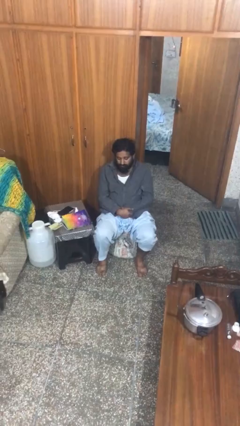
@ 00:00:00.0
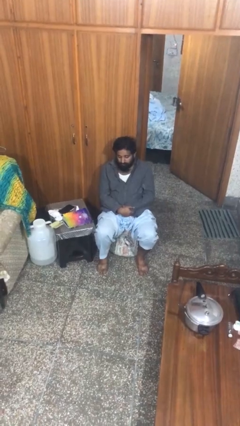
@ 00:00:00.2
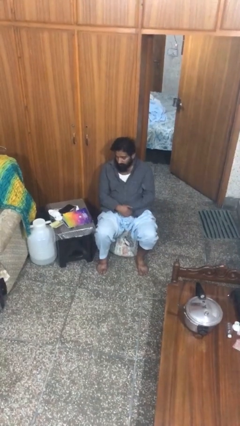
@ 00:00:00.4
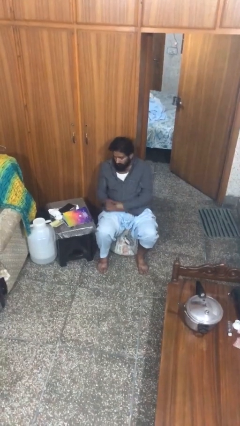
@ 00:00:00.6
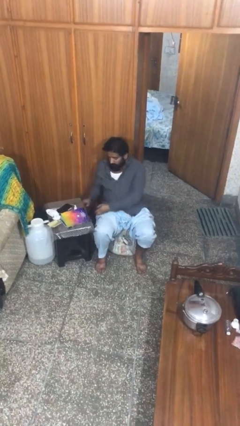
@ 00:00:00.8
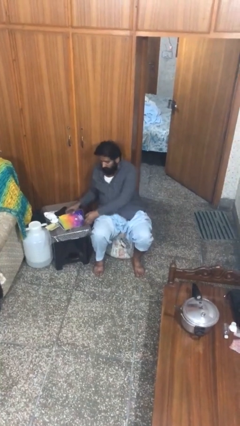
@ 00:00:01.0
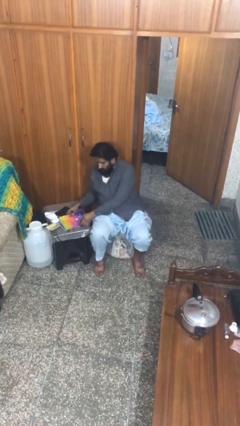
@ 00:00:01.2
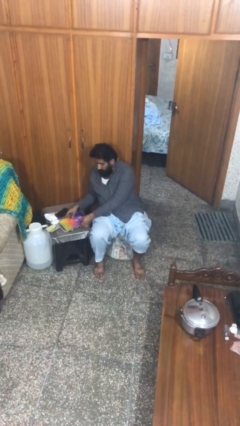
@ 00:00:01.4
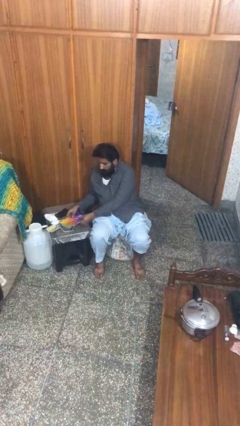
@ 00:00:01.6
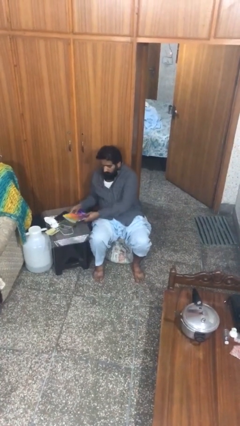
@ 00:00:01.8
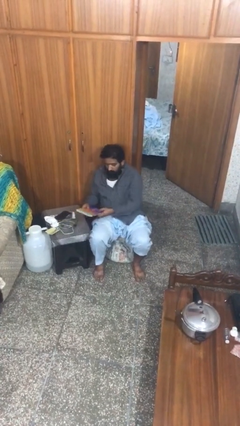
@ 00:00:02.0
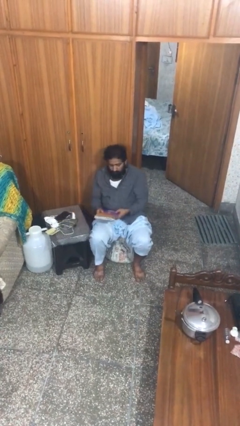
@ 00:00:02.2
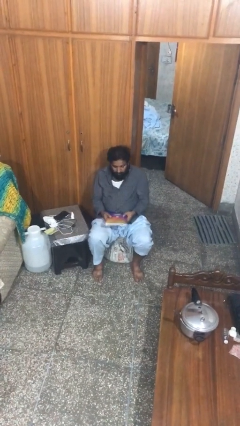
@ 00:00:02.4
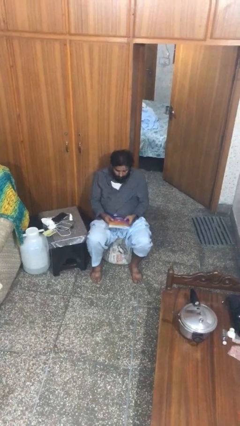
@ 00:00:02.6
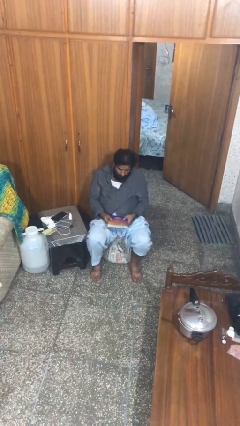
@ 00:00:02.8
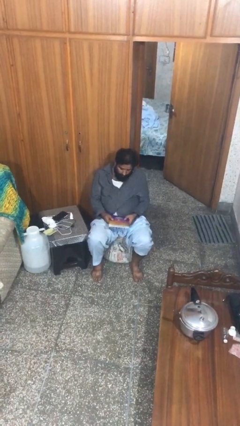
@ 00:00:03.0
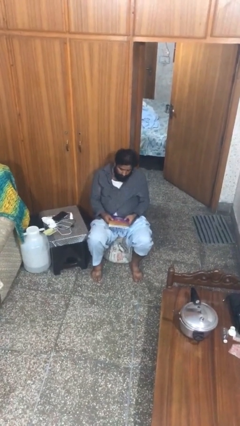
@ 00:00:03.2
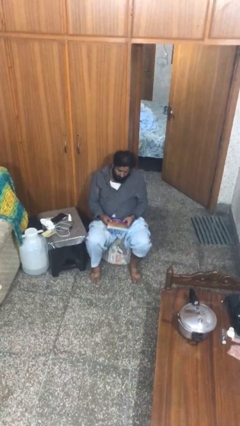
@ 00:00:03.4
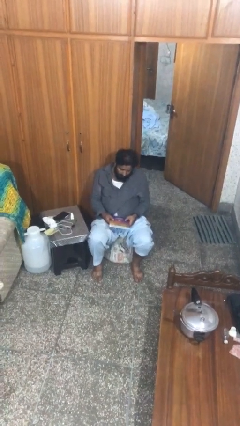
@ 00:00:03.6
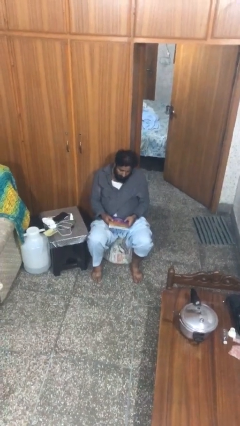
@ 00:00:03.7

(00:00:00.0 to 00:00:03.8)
person picks up object from table

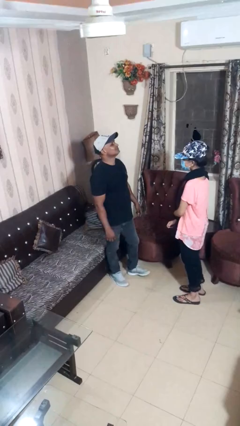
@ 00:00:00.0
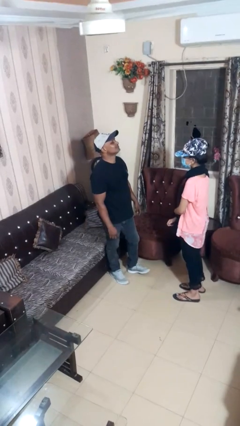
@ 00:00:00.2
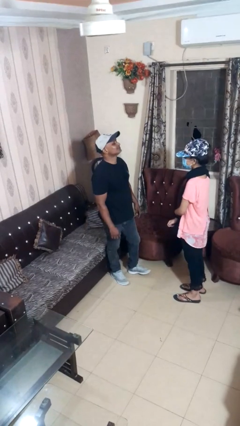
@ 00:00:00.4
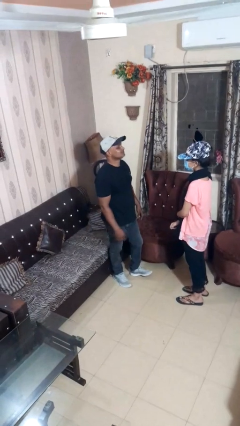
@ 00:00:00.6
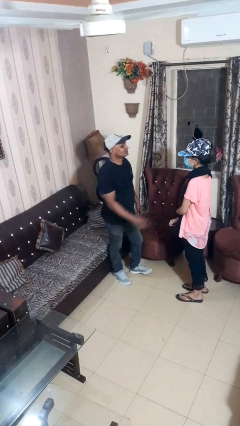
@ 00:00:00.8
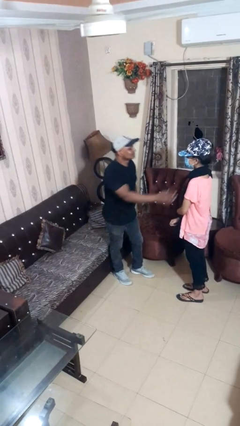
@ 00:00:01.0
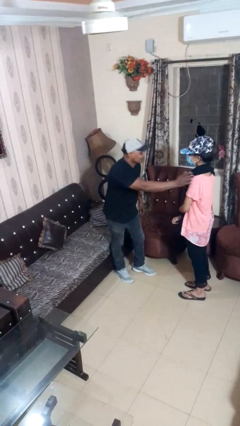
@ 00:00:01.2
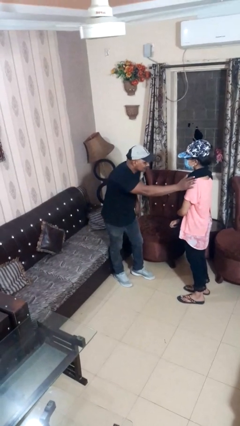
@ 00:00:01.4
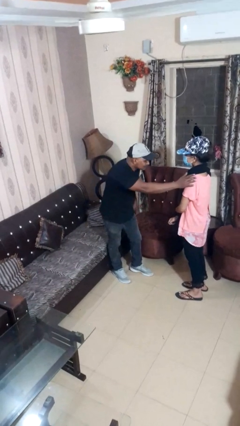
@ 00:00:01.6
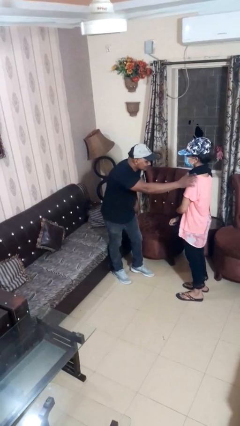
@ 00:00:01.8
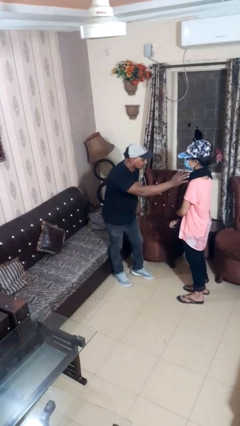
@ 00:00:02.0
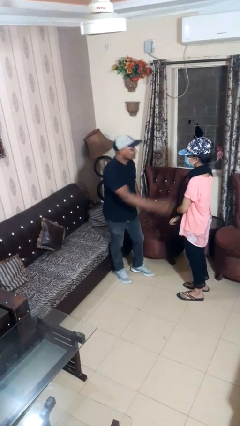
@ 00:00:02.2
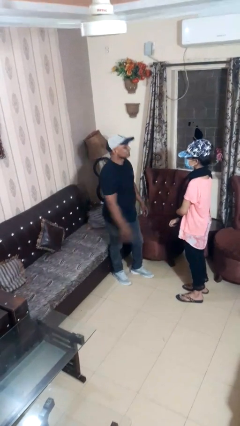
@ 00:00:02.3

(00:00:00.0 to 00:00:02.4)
person pounds shoulders of person

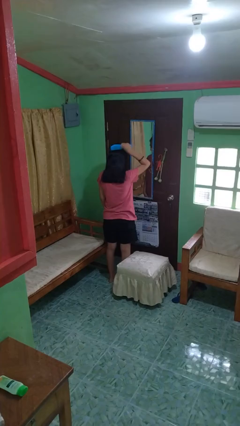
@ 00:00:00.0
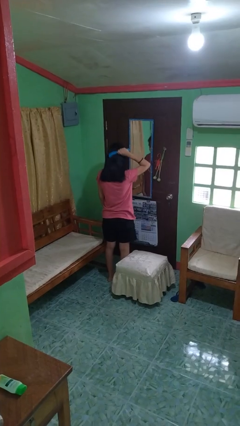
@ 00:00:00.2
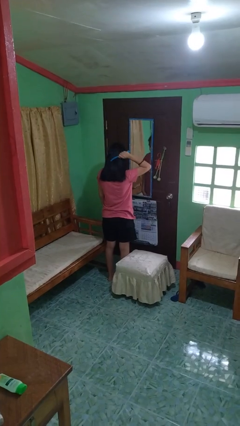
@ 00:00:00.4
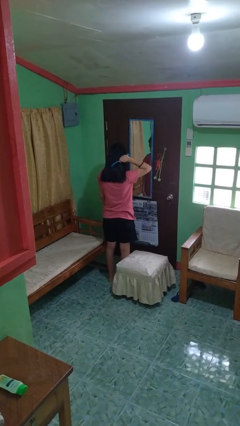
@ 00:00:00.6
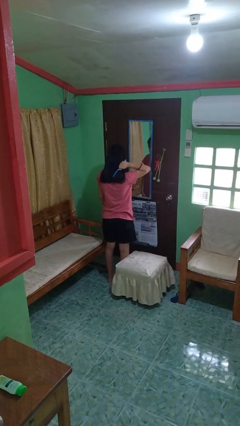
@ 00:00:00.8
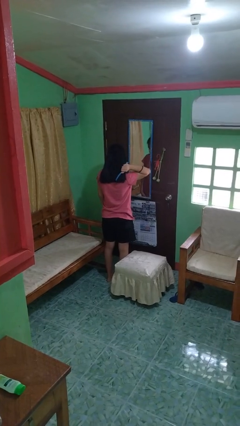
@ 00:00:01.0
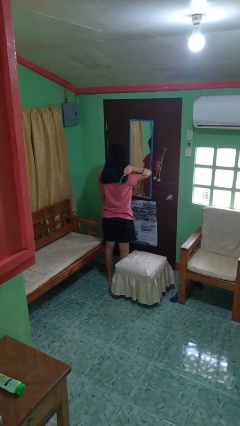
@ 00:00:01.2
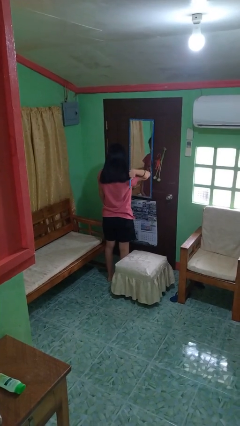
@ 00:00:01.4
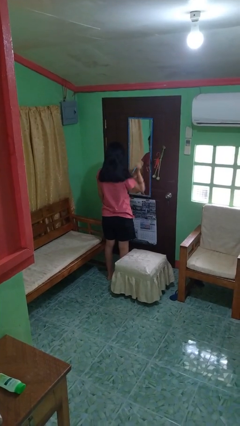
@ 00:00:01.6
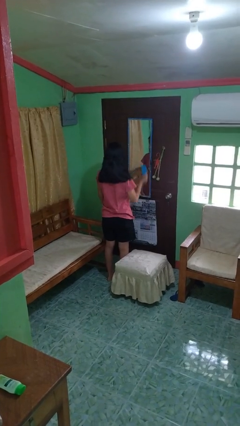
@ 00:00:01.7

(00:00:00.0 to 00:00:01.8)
person brushes hair

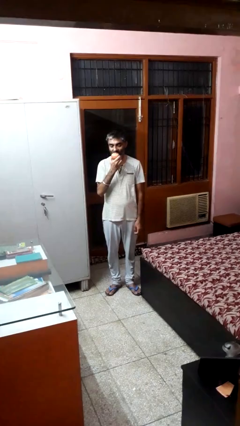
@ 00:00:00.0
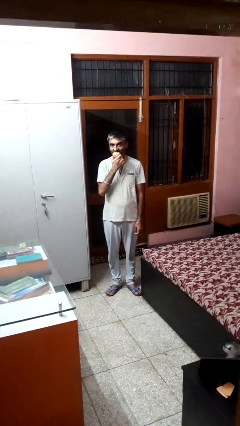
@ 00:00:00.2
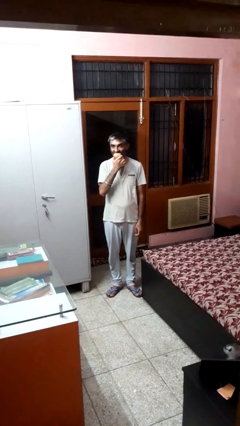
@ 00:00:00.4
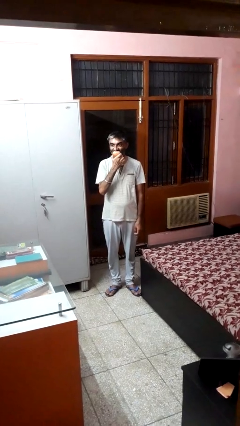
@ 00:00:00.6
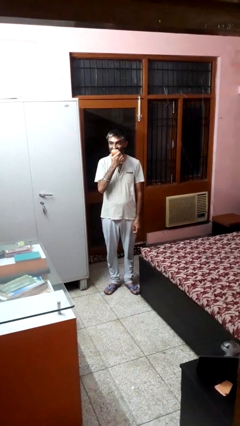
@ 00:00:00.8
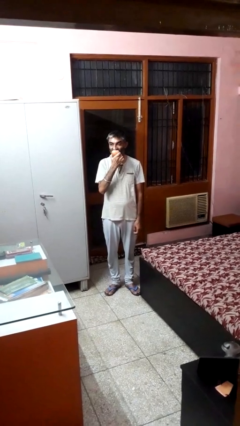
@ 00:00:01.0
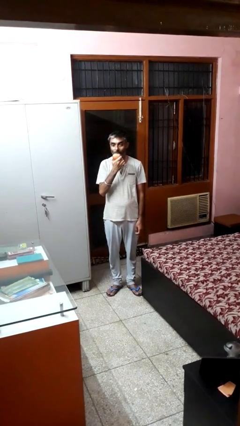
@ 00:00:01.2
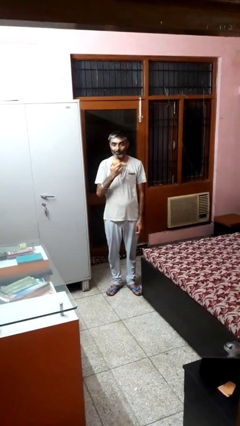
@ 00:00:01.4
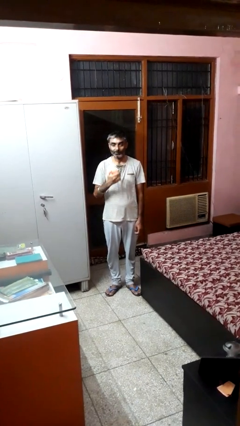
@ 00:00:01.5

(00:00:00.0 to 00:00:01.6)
person eats apple

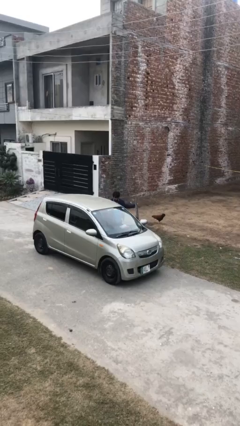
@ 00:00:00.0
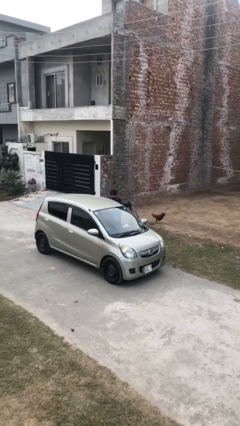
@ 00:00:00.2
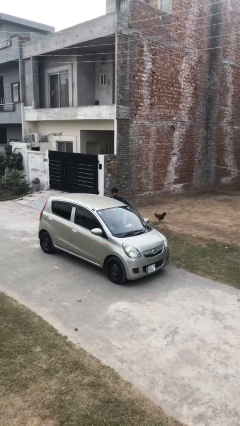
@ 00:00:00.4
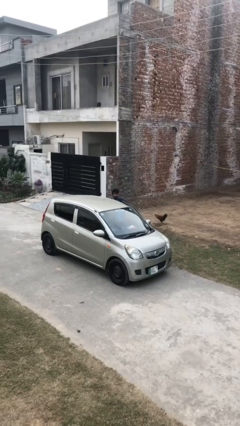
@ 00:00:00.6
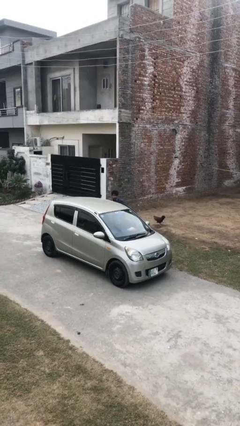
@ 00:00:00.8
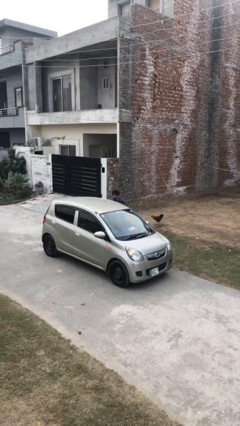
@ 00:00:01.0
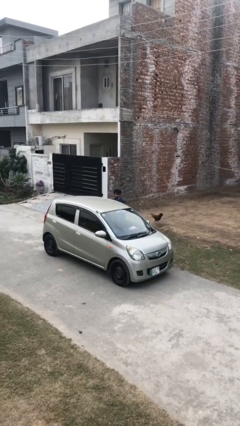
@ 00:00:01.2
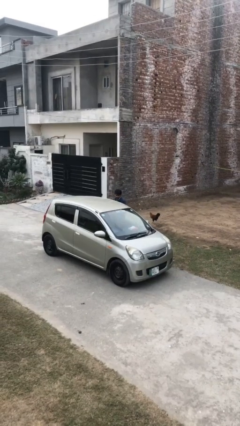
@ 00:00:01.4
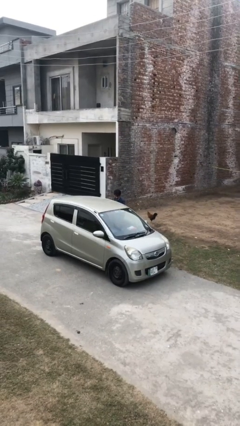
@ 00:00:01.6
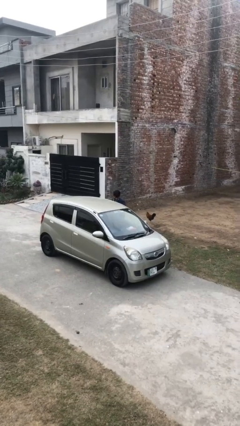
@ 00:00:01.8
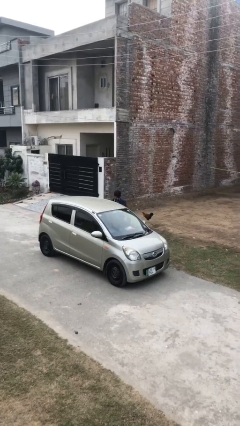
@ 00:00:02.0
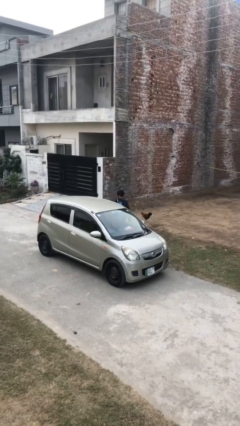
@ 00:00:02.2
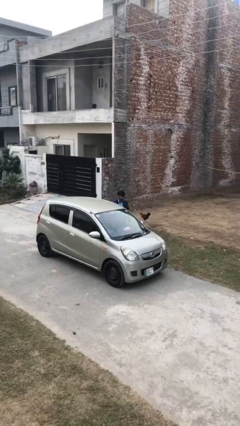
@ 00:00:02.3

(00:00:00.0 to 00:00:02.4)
person closes car door

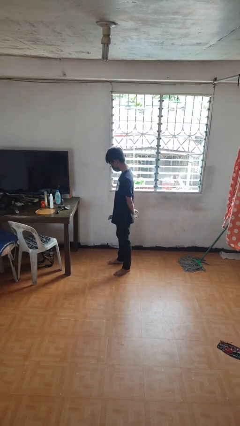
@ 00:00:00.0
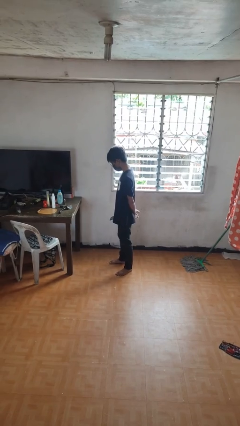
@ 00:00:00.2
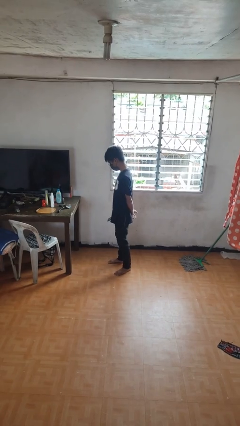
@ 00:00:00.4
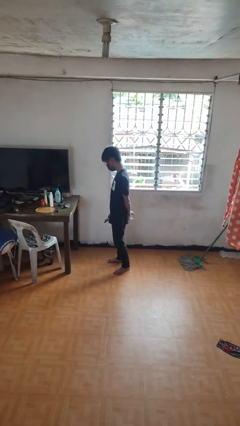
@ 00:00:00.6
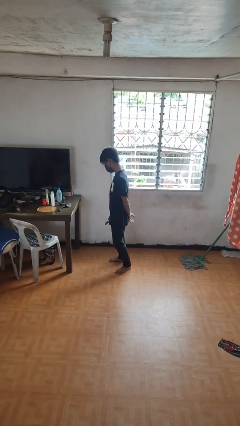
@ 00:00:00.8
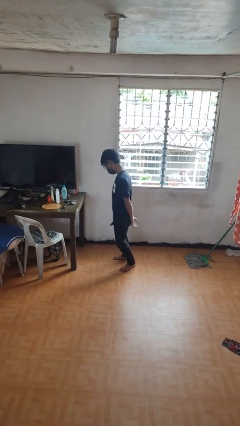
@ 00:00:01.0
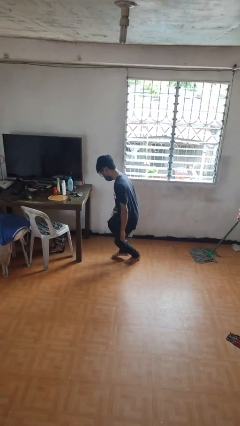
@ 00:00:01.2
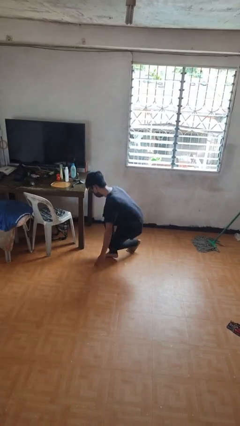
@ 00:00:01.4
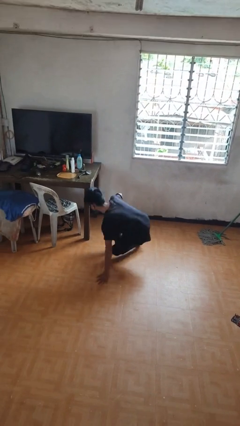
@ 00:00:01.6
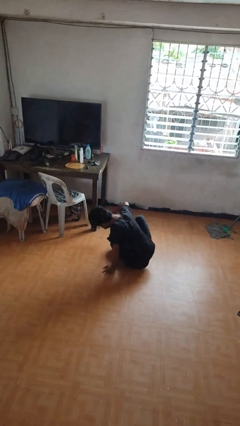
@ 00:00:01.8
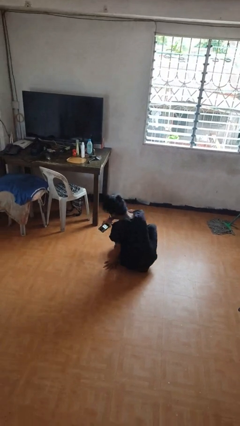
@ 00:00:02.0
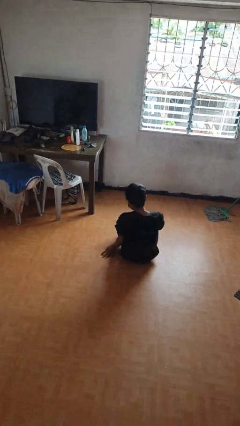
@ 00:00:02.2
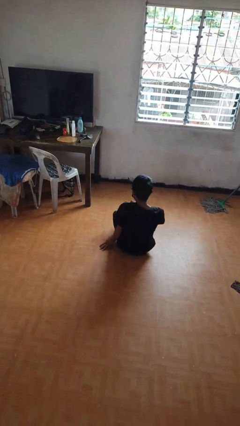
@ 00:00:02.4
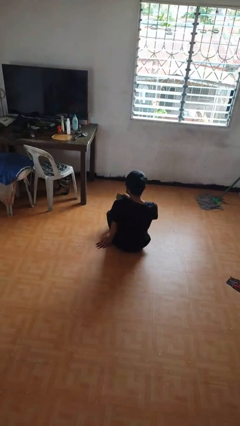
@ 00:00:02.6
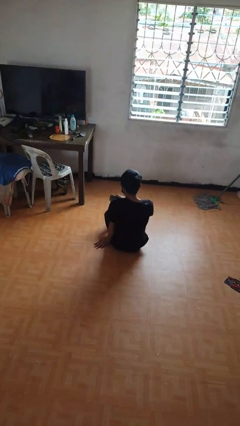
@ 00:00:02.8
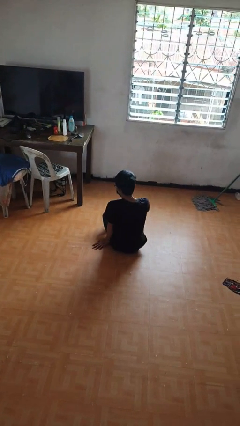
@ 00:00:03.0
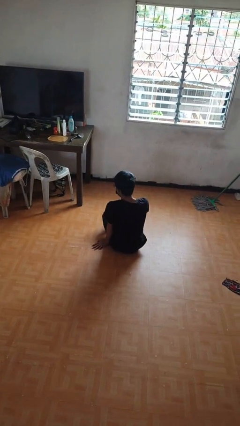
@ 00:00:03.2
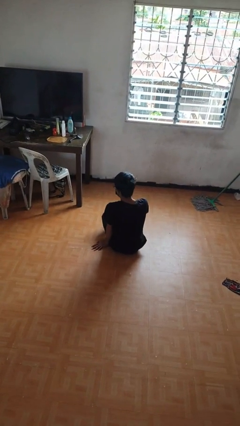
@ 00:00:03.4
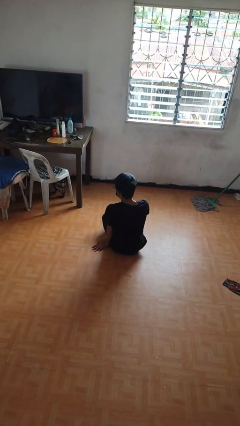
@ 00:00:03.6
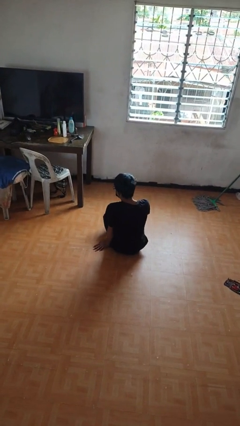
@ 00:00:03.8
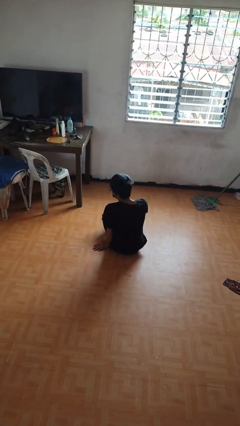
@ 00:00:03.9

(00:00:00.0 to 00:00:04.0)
person falls while standing

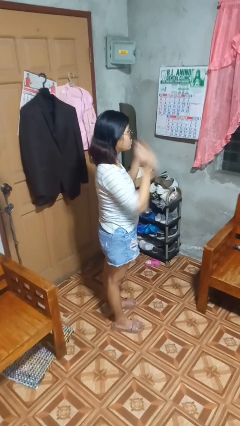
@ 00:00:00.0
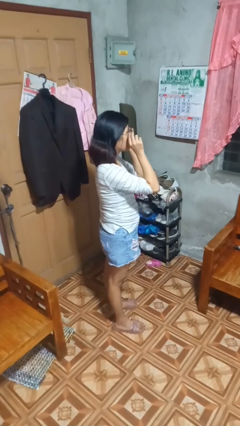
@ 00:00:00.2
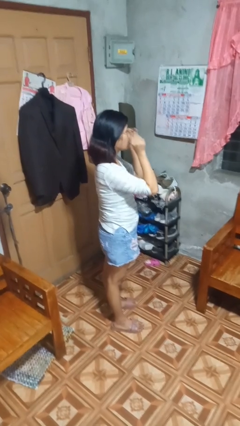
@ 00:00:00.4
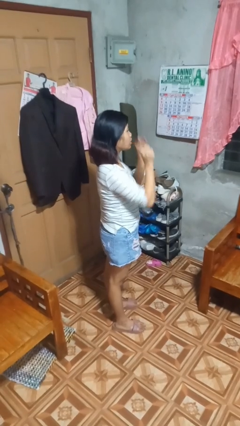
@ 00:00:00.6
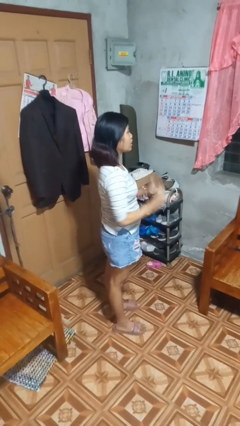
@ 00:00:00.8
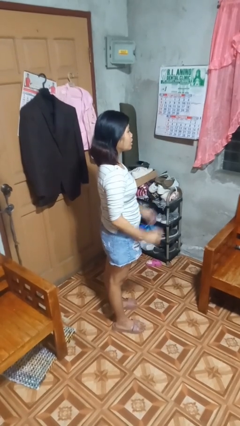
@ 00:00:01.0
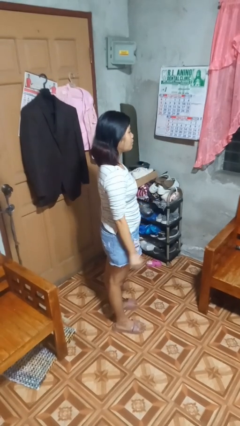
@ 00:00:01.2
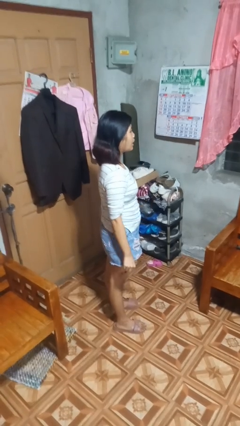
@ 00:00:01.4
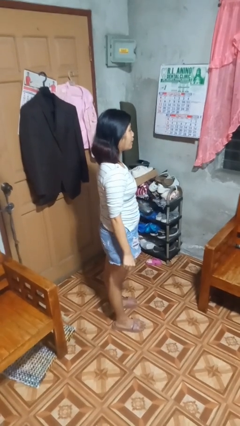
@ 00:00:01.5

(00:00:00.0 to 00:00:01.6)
person takes off sunglasses
